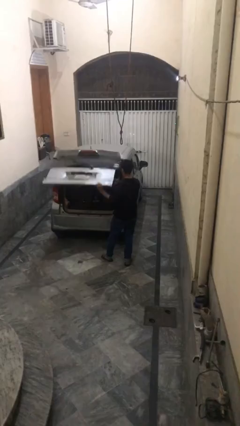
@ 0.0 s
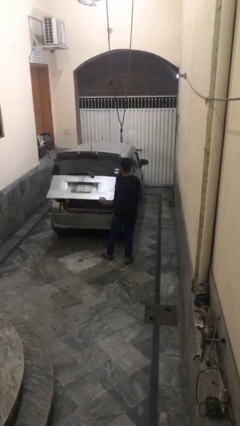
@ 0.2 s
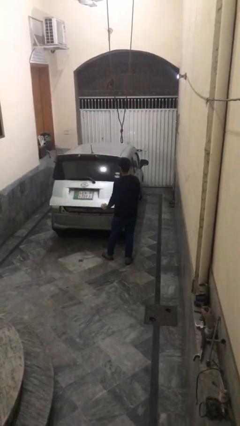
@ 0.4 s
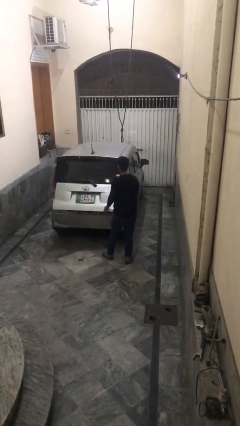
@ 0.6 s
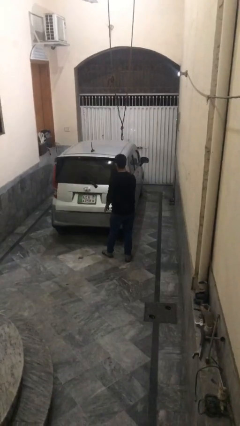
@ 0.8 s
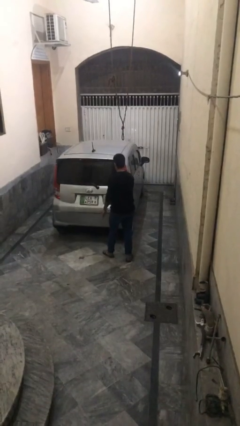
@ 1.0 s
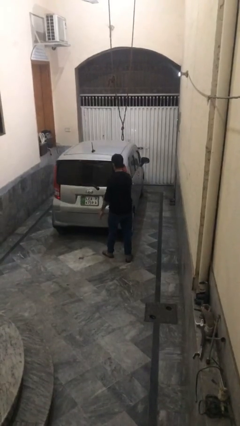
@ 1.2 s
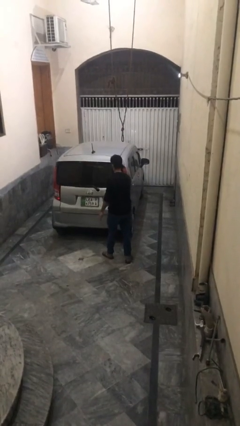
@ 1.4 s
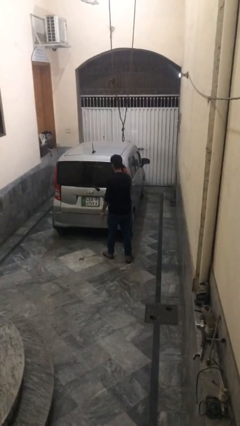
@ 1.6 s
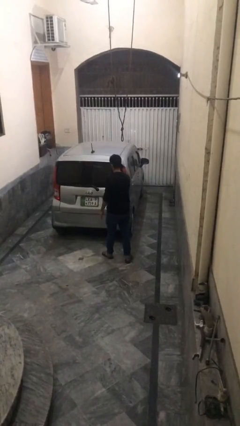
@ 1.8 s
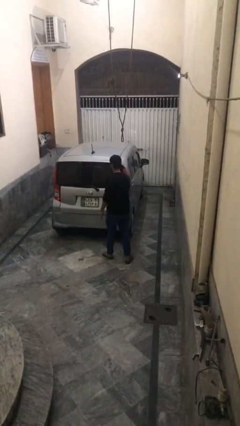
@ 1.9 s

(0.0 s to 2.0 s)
person closes car trunk

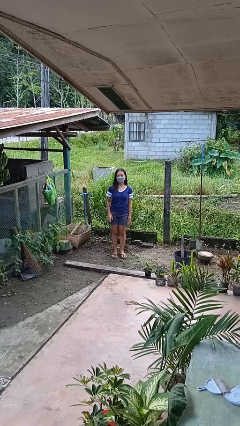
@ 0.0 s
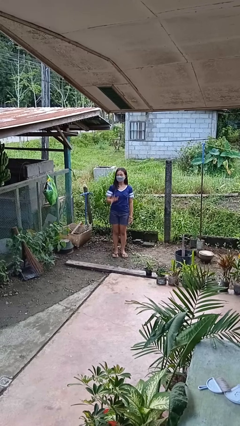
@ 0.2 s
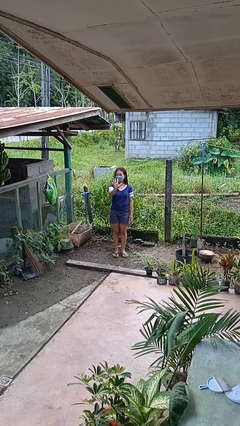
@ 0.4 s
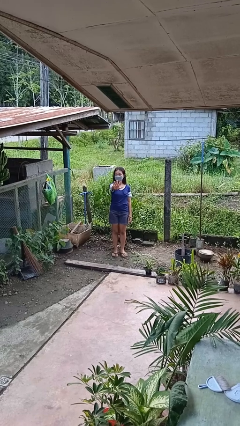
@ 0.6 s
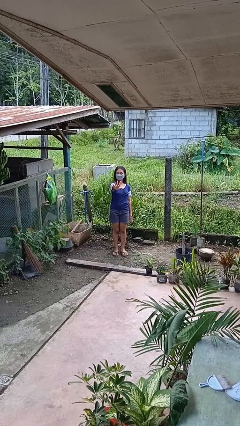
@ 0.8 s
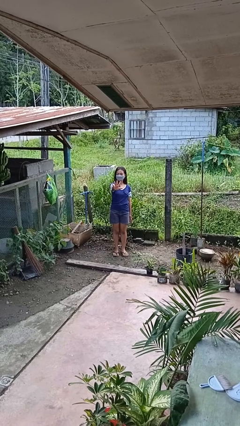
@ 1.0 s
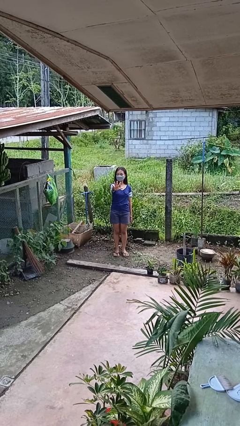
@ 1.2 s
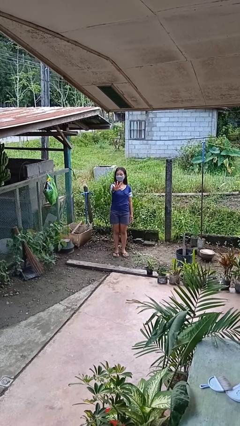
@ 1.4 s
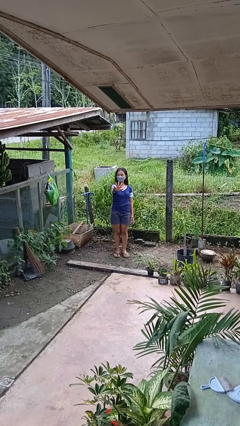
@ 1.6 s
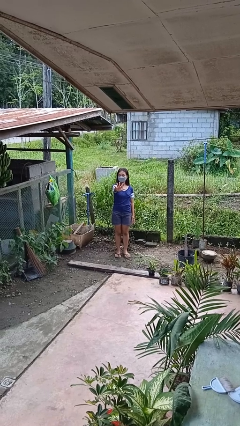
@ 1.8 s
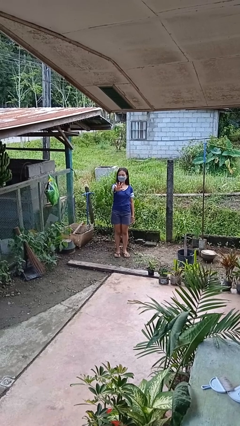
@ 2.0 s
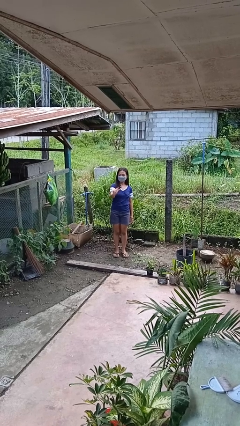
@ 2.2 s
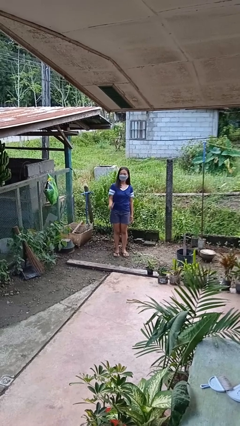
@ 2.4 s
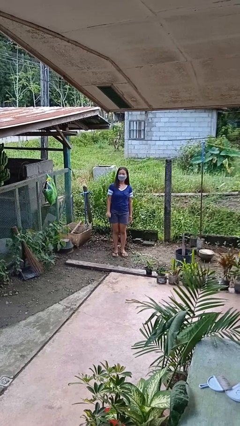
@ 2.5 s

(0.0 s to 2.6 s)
person gestures number five

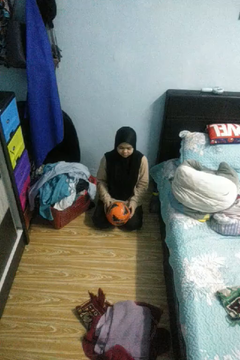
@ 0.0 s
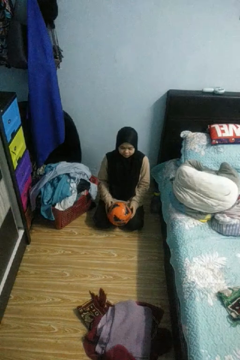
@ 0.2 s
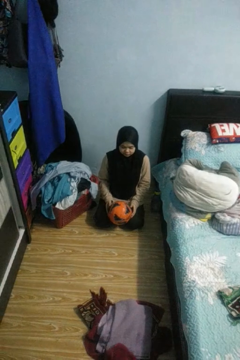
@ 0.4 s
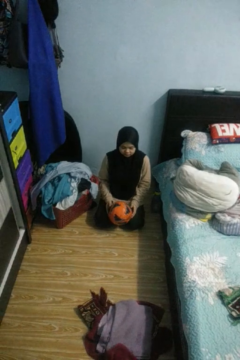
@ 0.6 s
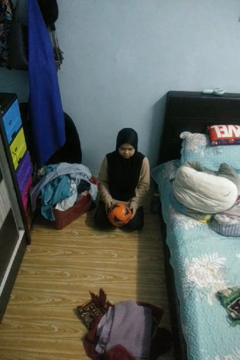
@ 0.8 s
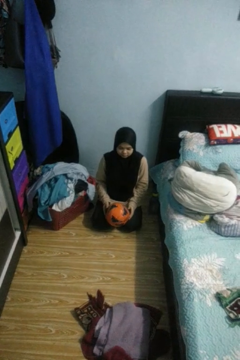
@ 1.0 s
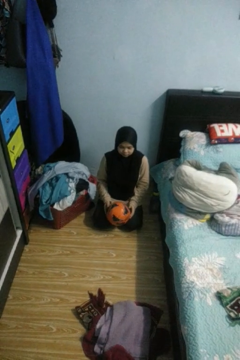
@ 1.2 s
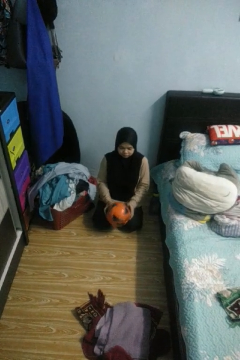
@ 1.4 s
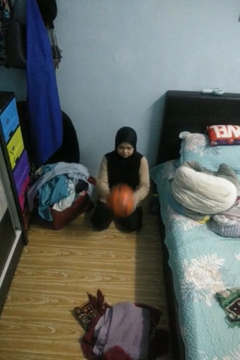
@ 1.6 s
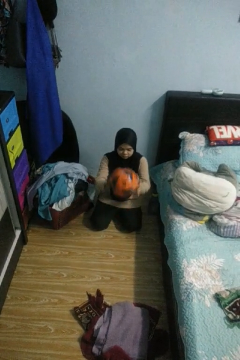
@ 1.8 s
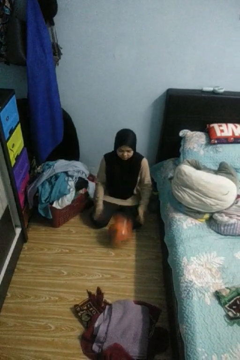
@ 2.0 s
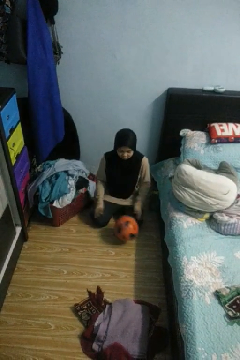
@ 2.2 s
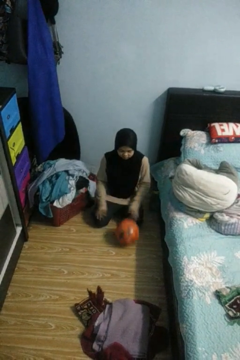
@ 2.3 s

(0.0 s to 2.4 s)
person bounces ball on floor

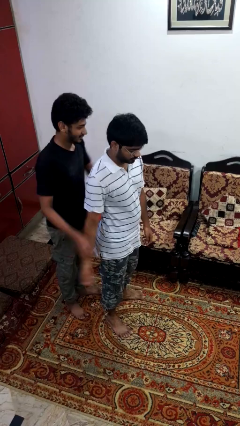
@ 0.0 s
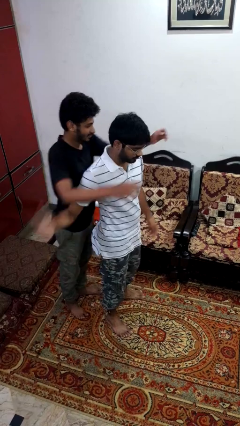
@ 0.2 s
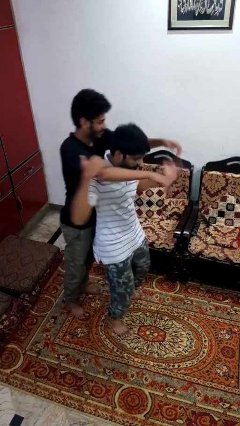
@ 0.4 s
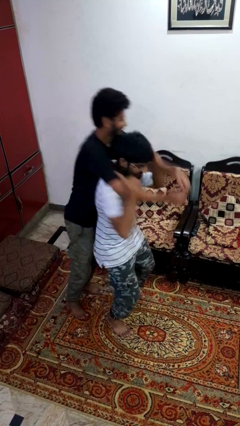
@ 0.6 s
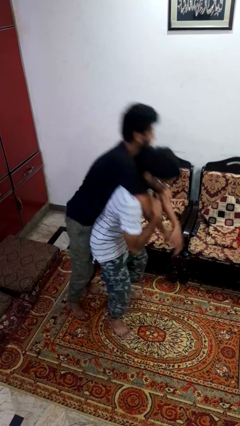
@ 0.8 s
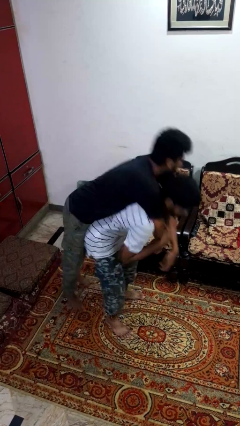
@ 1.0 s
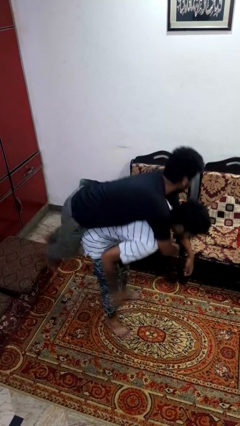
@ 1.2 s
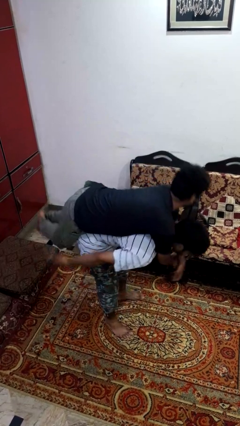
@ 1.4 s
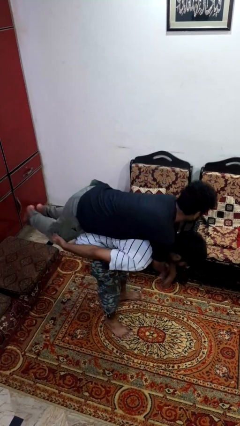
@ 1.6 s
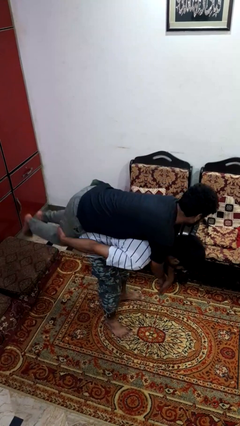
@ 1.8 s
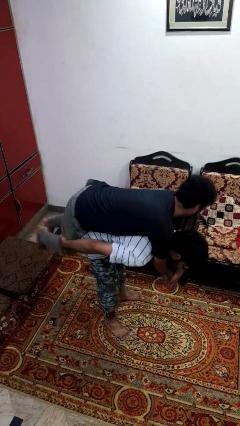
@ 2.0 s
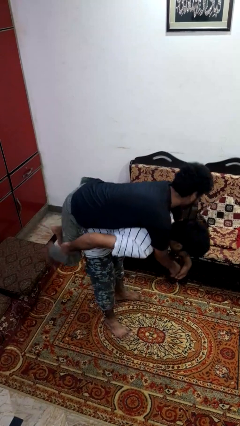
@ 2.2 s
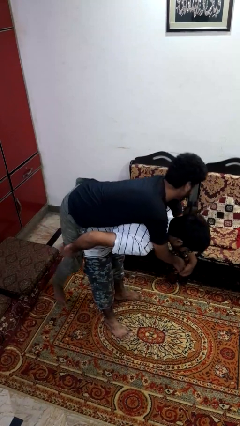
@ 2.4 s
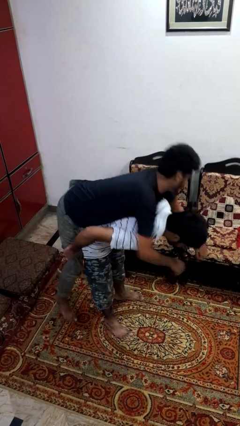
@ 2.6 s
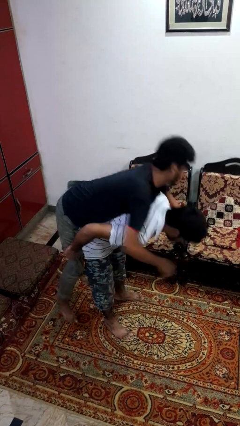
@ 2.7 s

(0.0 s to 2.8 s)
person carries person over shoulder

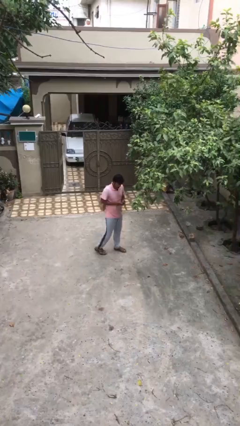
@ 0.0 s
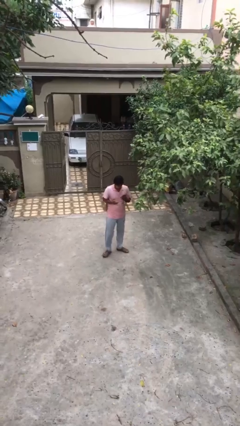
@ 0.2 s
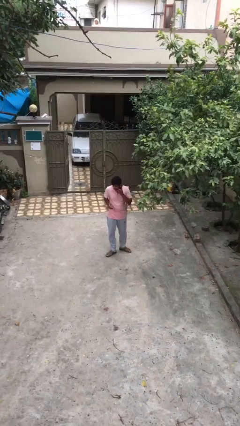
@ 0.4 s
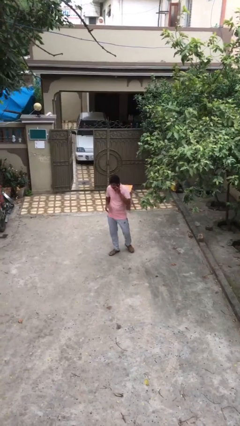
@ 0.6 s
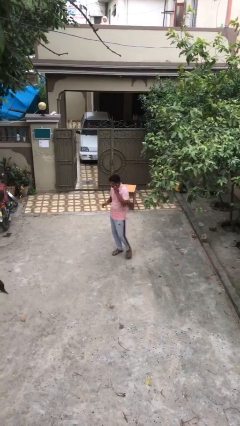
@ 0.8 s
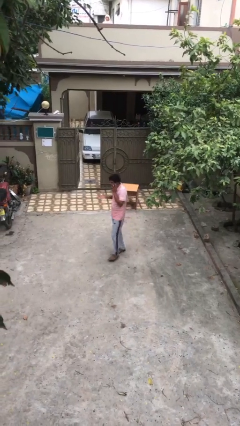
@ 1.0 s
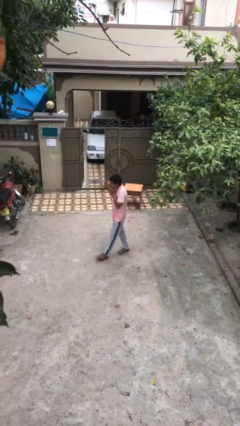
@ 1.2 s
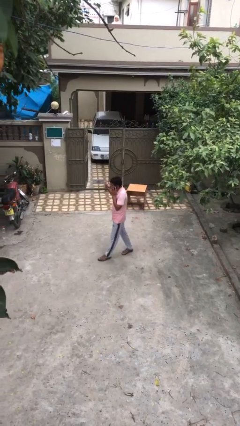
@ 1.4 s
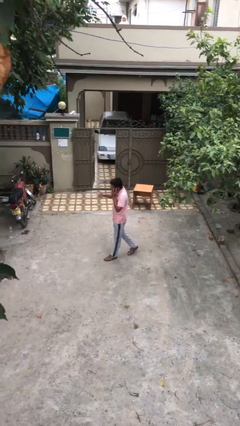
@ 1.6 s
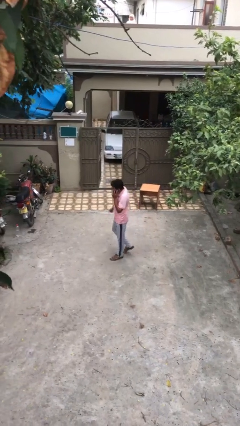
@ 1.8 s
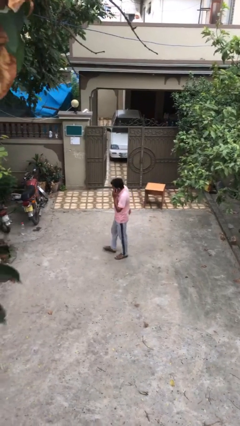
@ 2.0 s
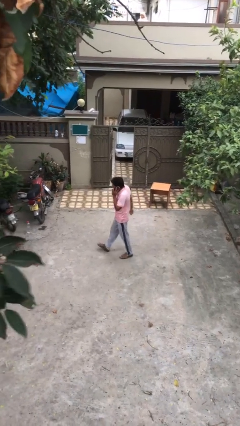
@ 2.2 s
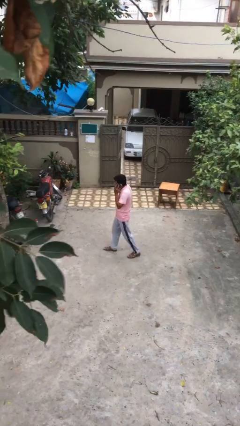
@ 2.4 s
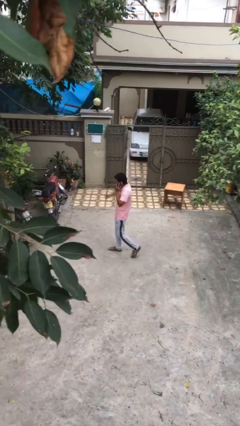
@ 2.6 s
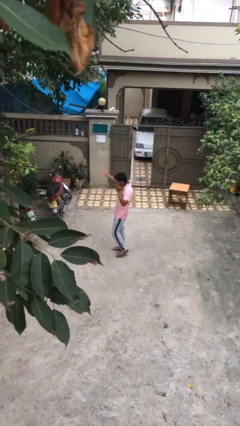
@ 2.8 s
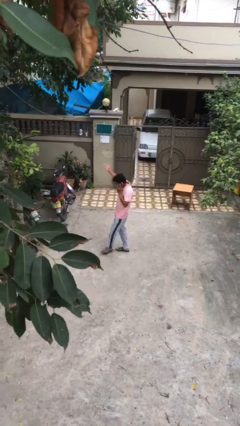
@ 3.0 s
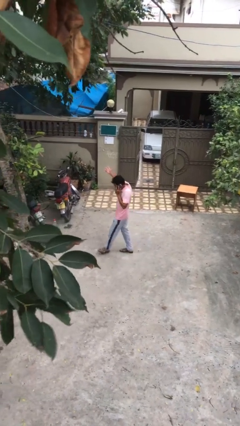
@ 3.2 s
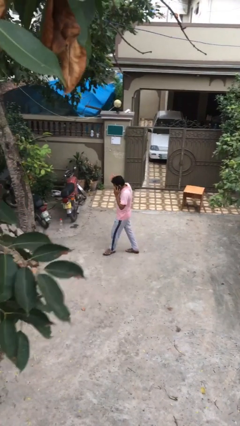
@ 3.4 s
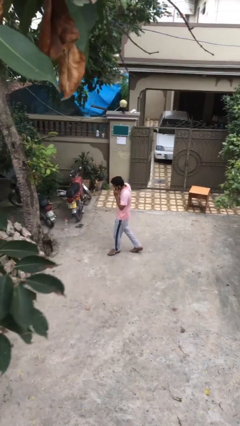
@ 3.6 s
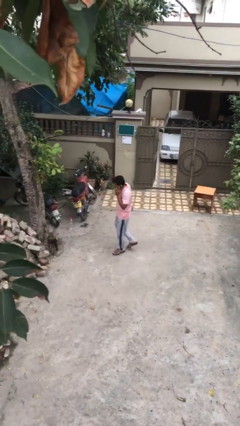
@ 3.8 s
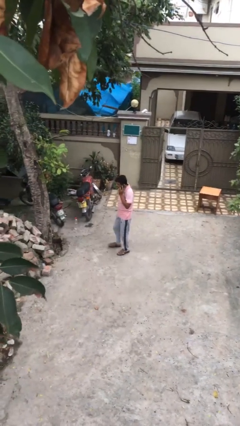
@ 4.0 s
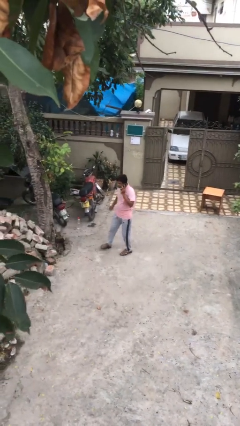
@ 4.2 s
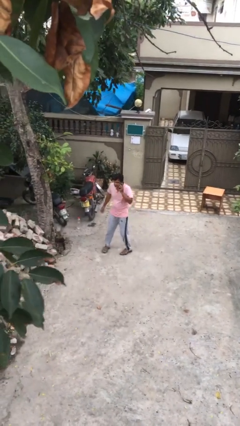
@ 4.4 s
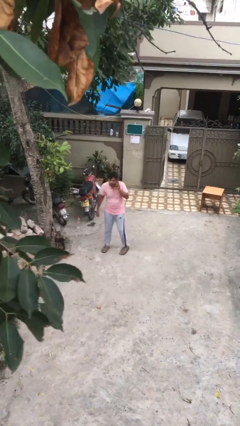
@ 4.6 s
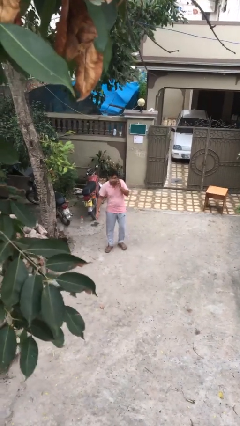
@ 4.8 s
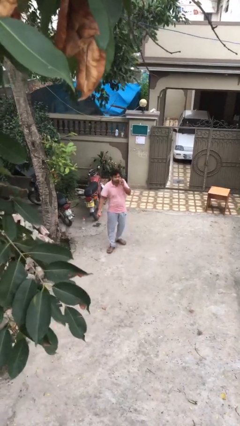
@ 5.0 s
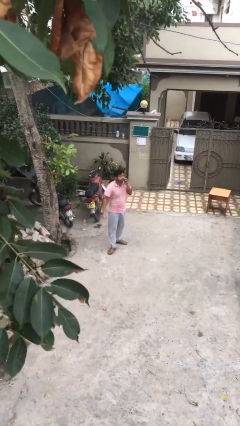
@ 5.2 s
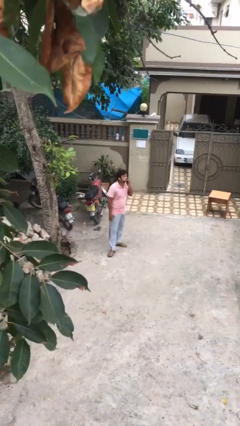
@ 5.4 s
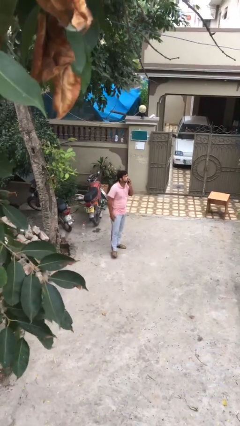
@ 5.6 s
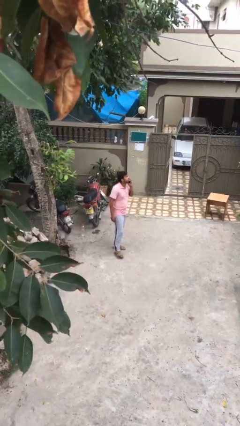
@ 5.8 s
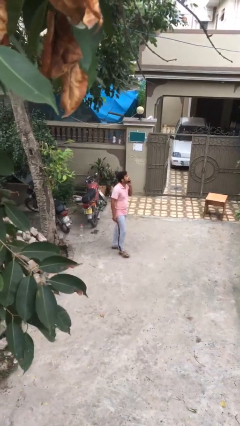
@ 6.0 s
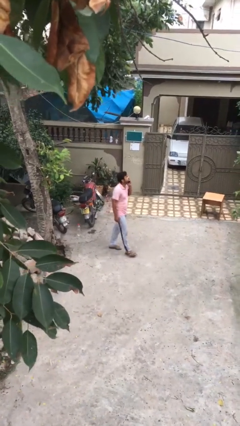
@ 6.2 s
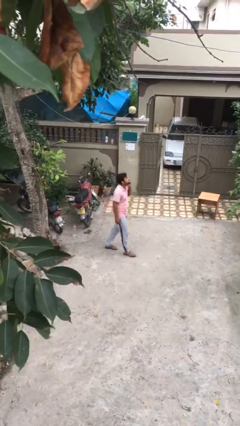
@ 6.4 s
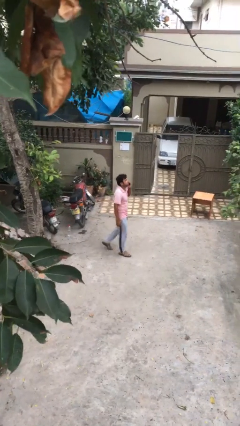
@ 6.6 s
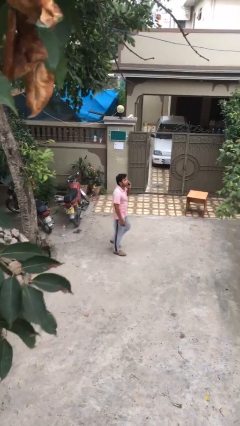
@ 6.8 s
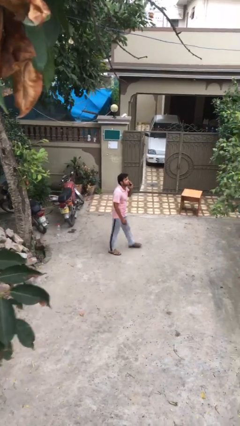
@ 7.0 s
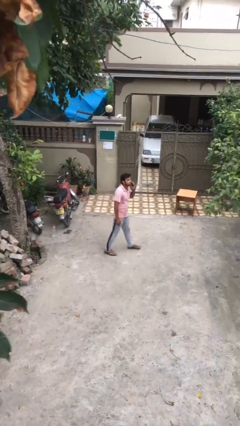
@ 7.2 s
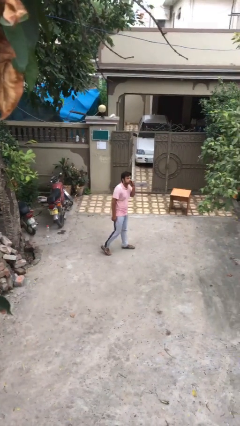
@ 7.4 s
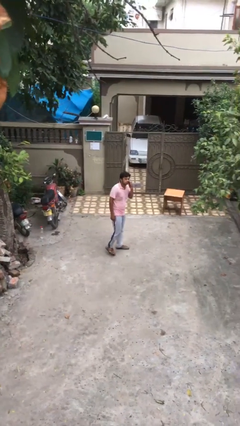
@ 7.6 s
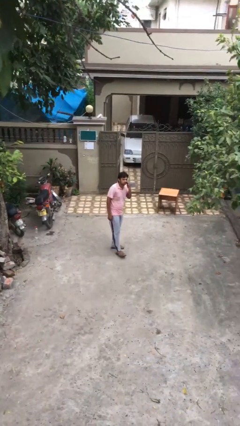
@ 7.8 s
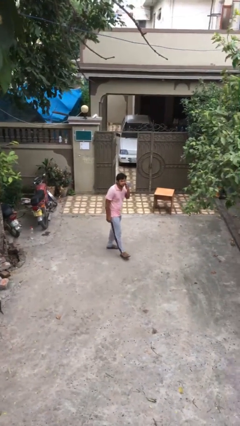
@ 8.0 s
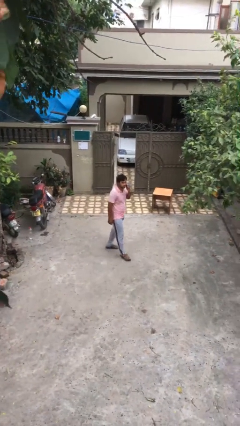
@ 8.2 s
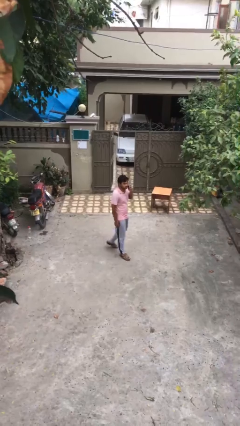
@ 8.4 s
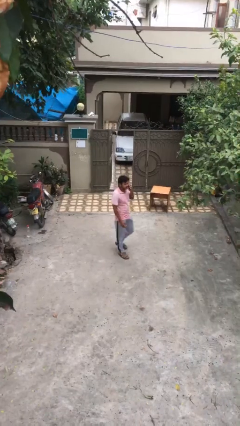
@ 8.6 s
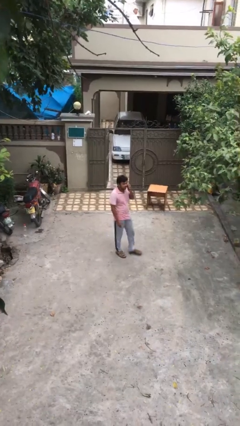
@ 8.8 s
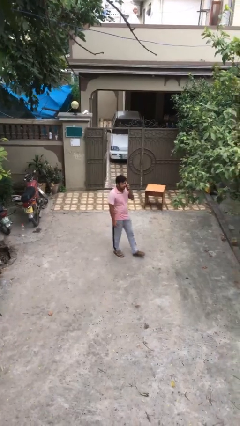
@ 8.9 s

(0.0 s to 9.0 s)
person talks on phone
